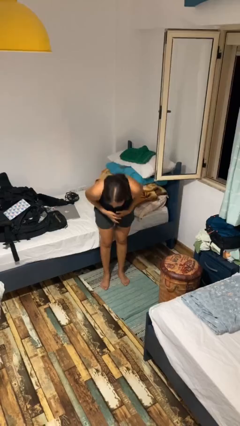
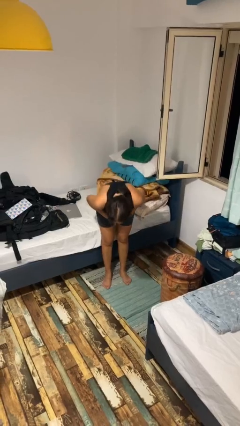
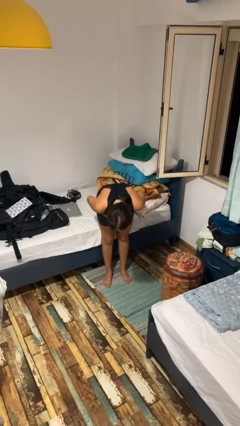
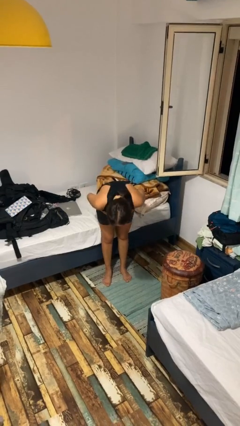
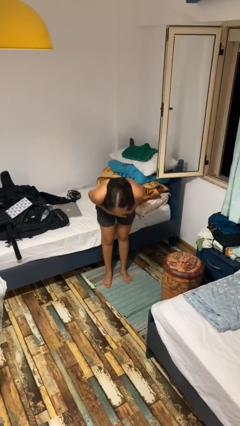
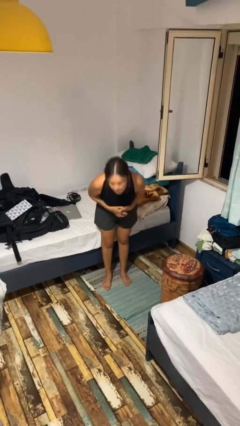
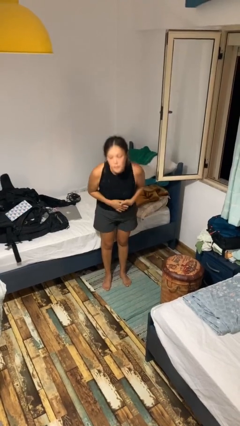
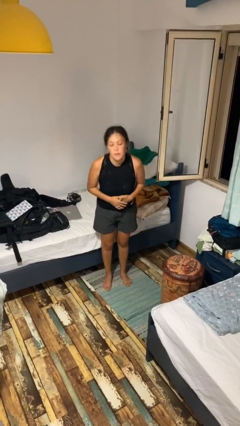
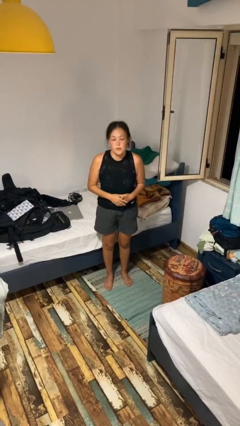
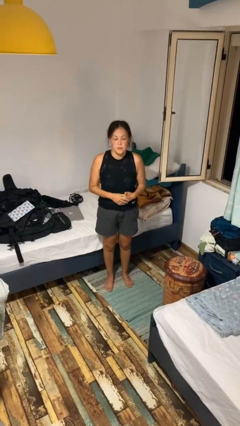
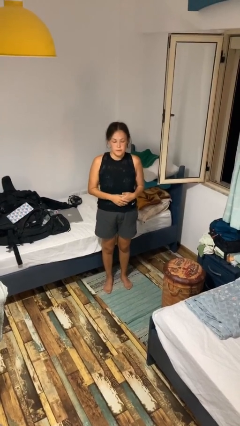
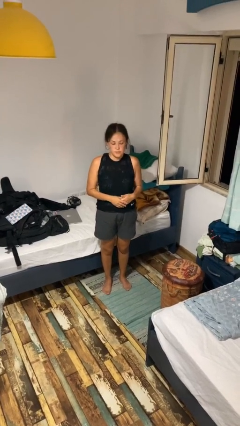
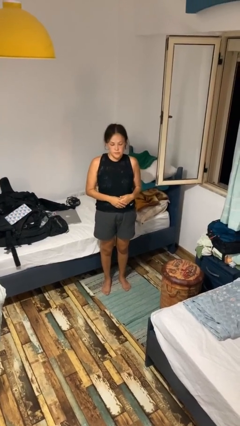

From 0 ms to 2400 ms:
person bows

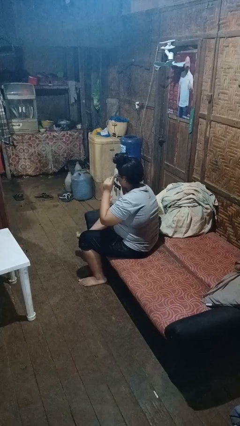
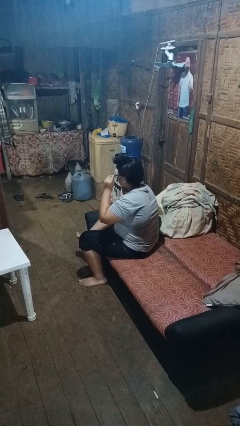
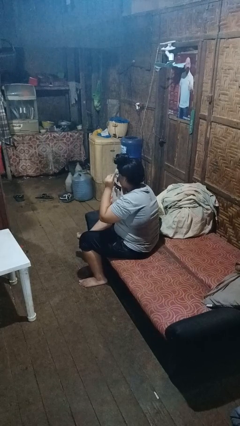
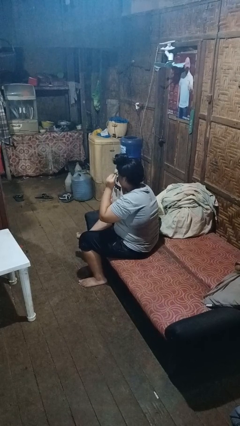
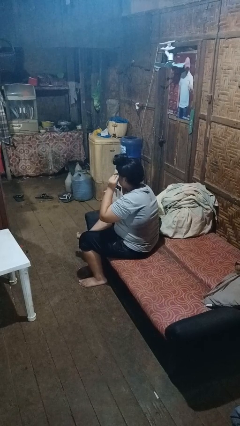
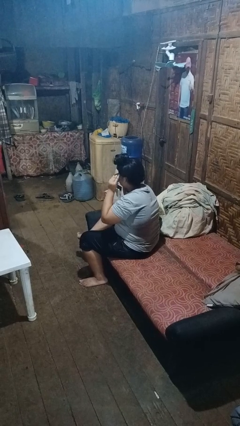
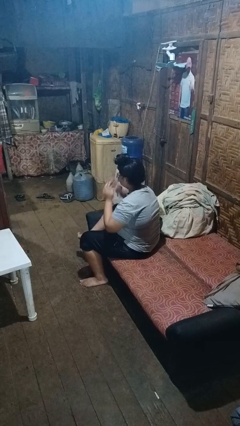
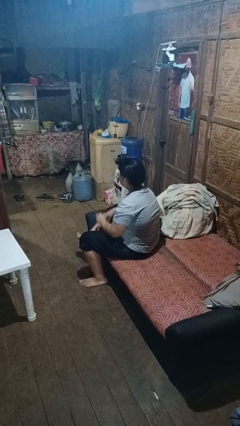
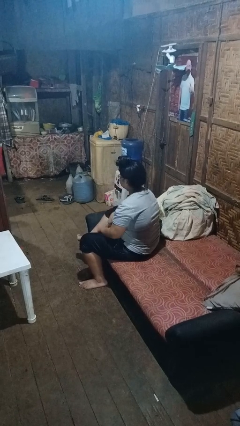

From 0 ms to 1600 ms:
person puts on glasses

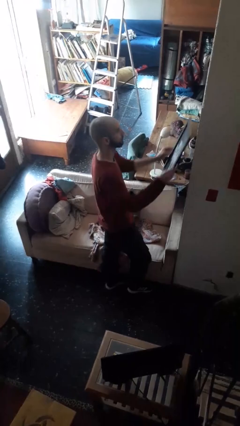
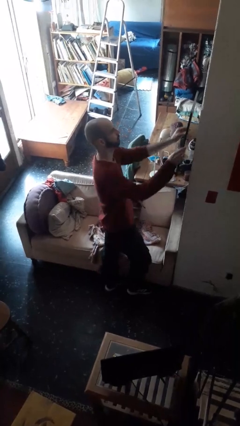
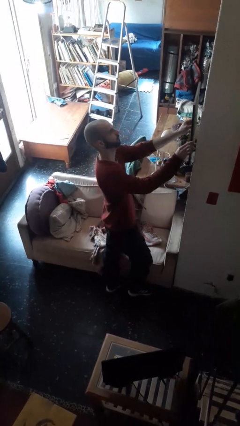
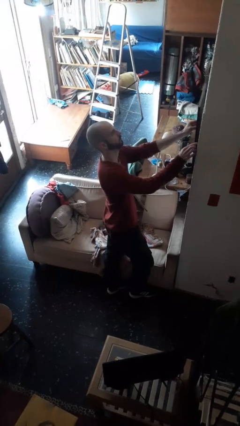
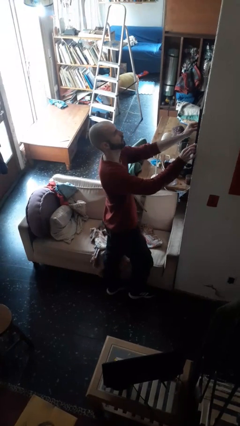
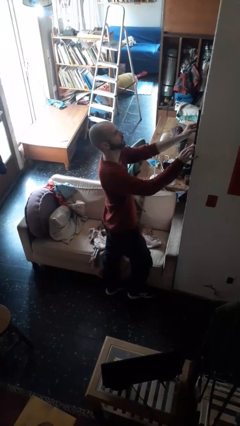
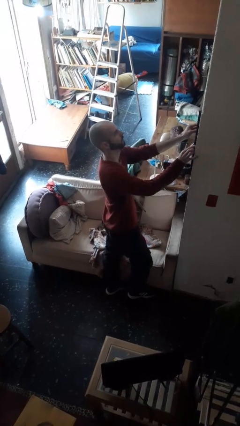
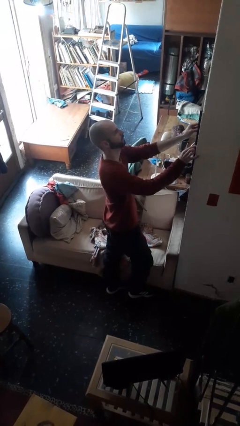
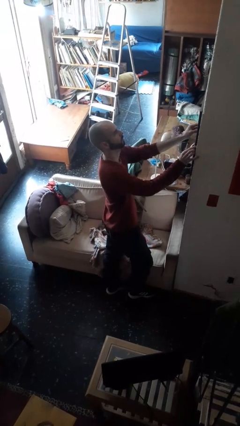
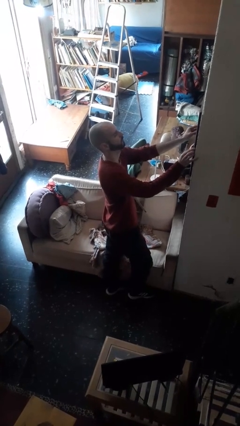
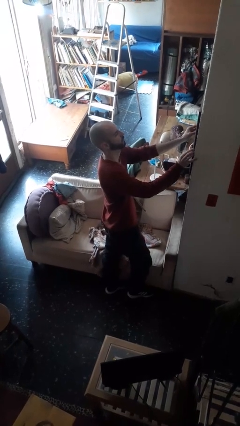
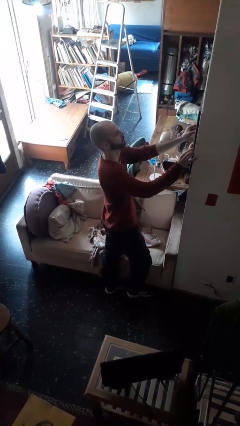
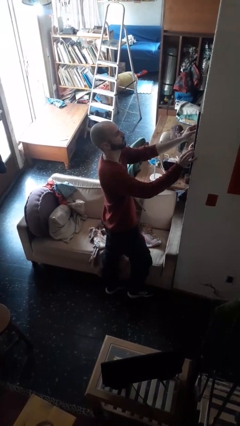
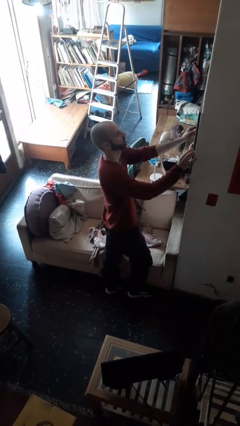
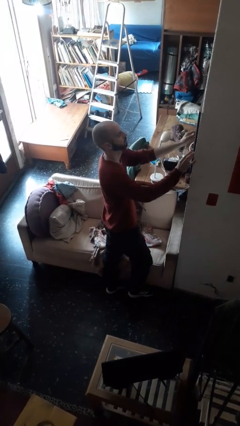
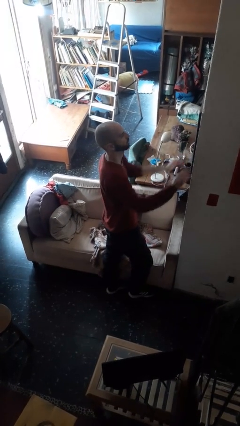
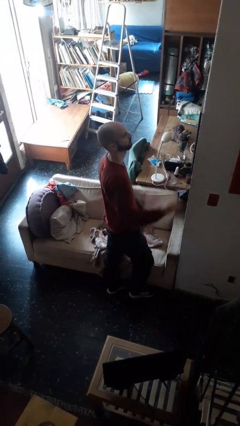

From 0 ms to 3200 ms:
person puts up picture frame

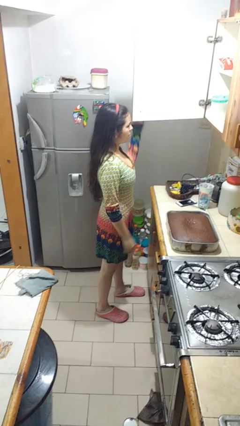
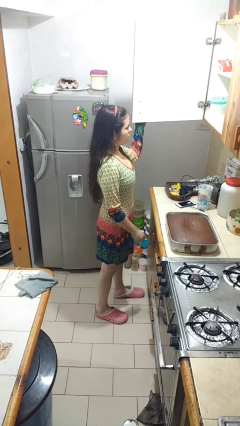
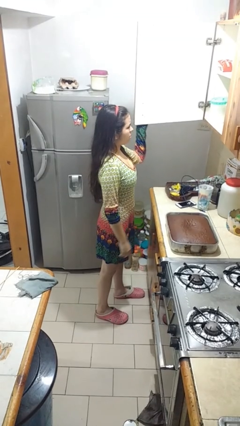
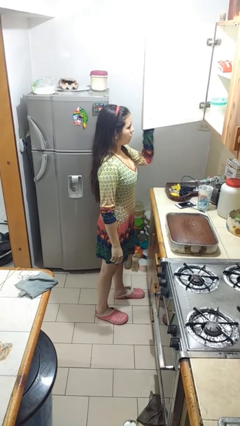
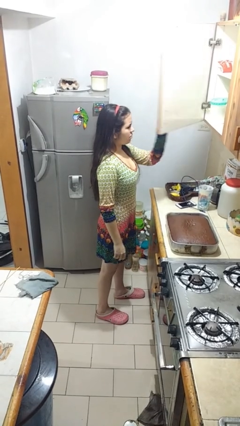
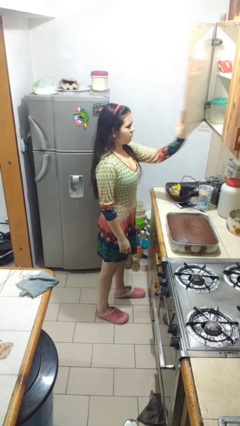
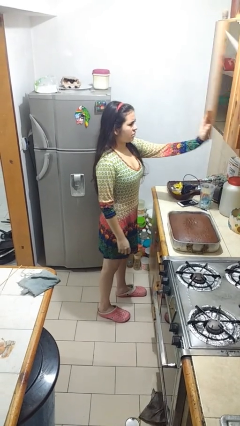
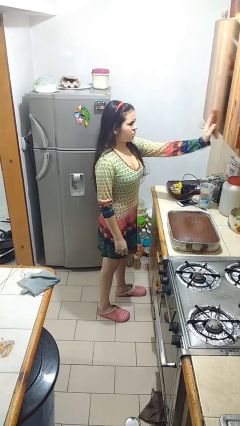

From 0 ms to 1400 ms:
person closes cabinet

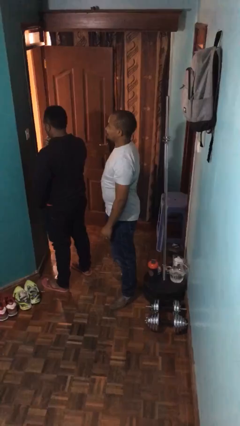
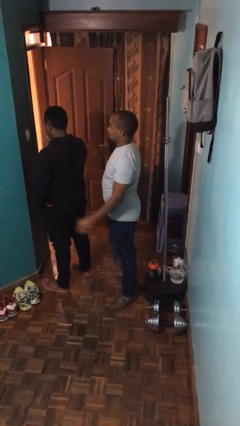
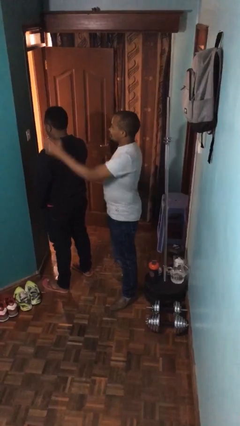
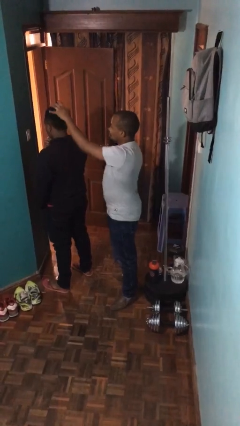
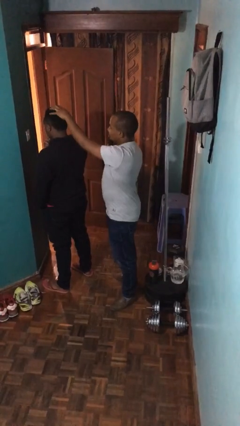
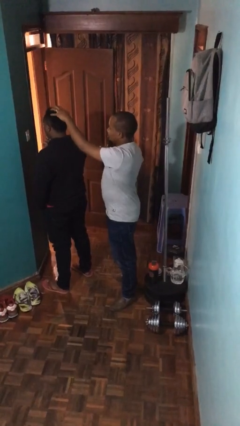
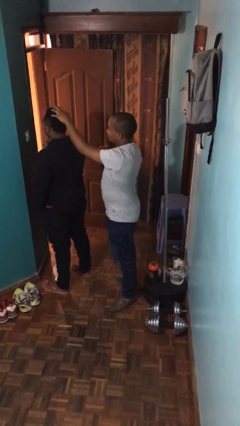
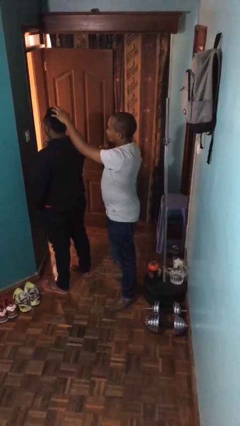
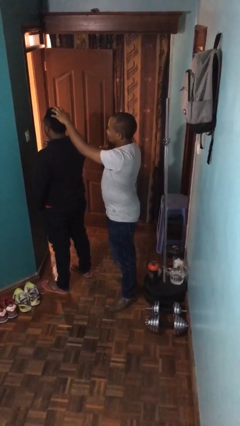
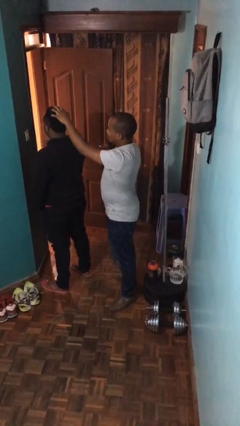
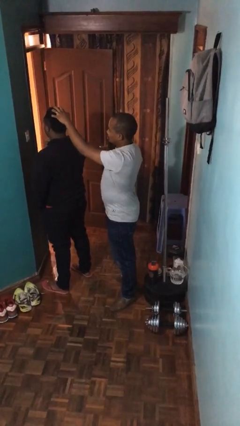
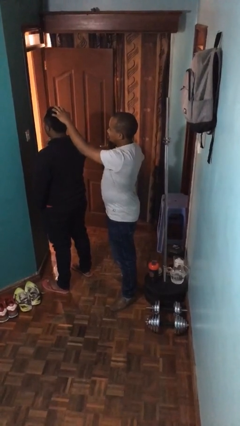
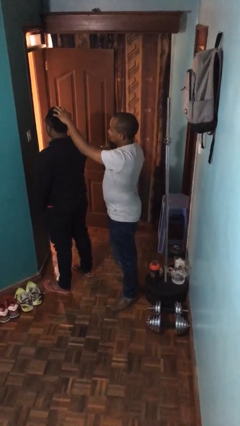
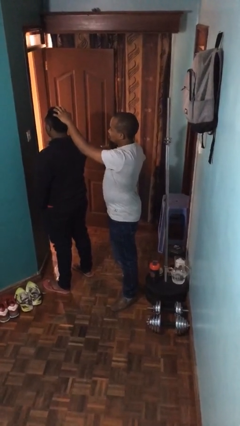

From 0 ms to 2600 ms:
person grabs person by hair

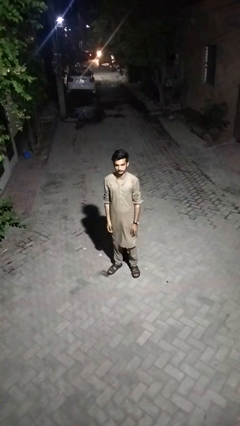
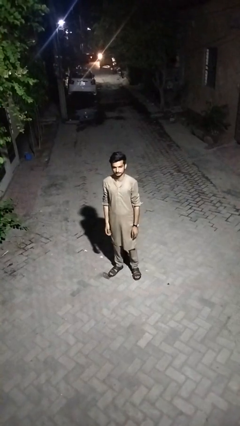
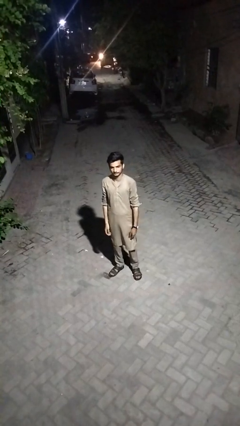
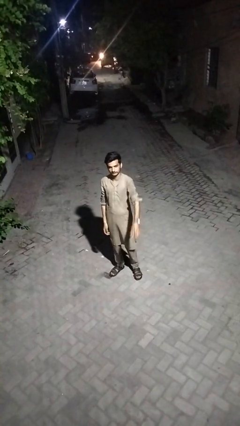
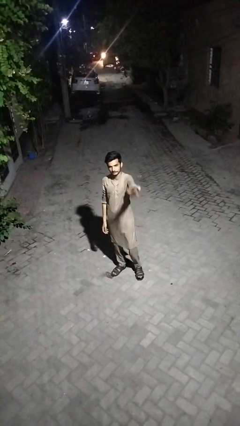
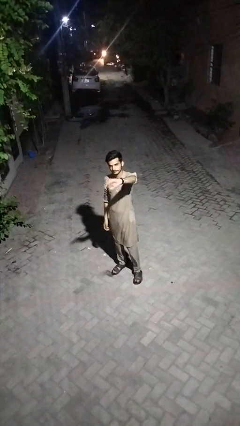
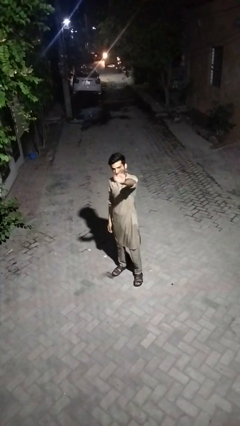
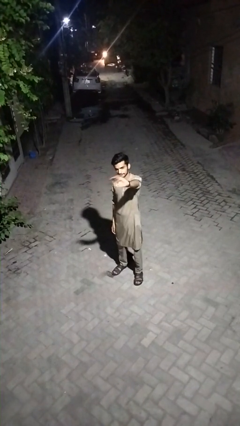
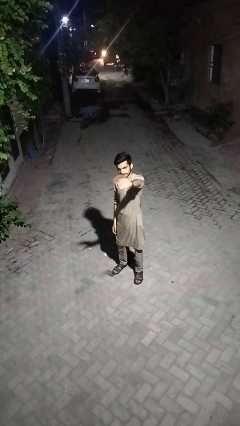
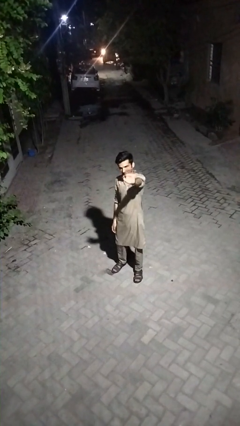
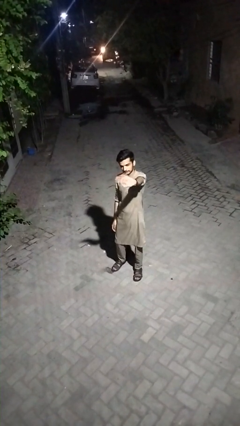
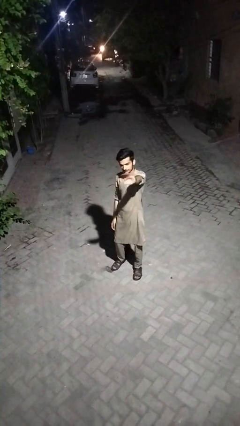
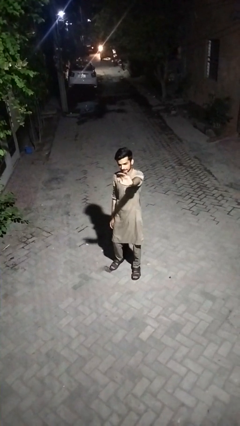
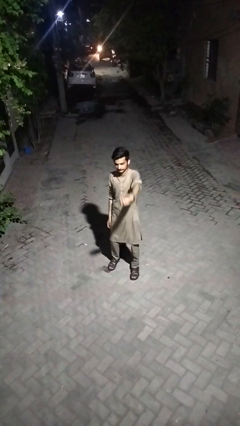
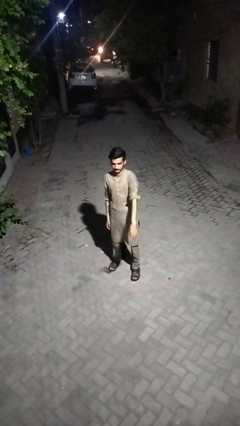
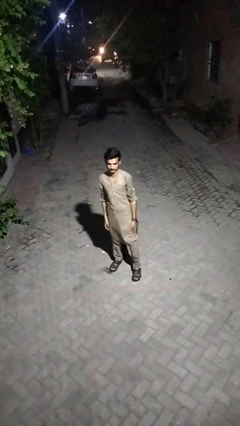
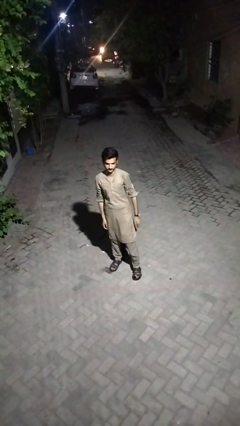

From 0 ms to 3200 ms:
person waves at person

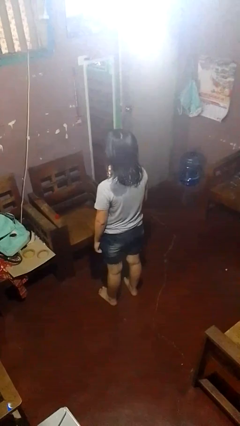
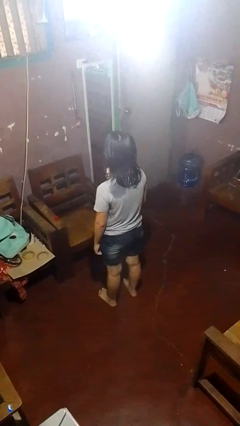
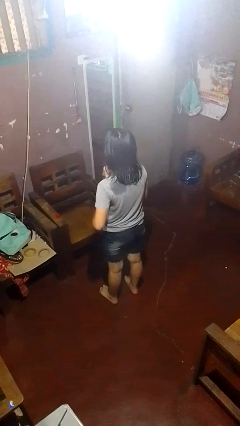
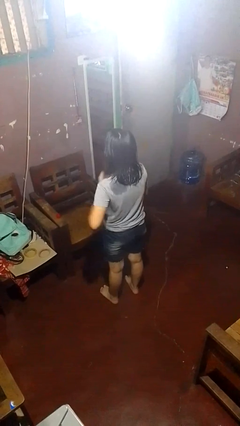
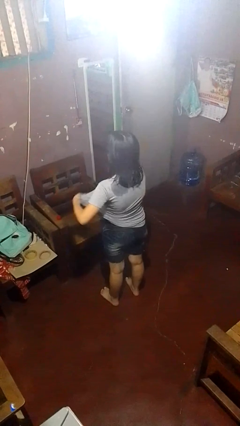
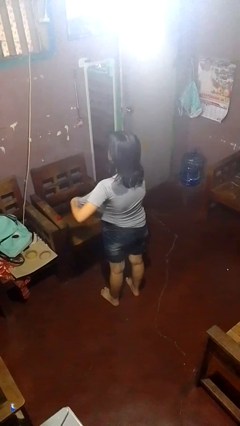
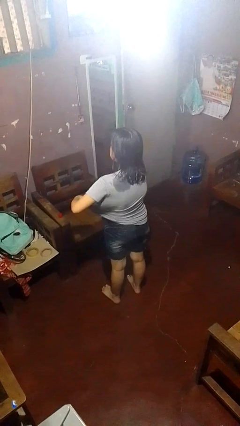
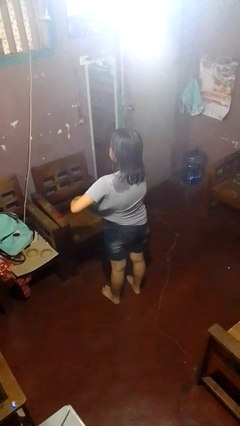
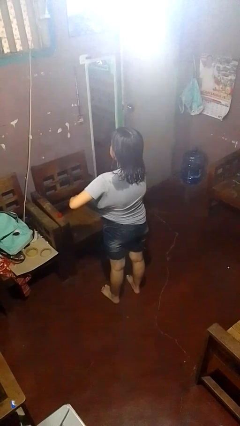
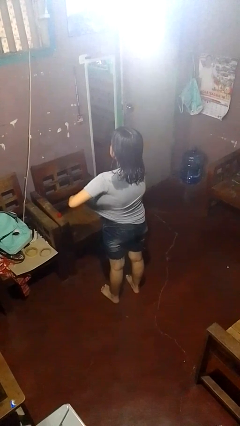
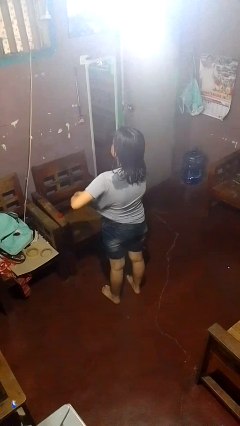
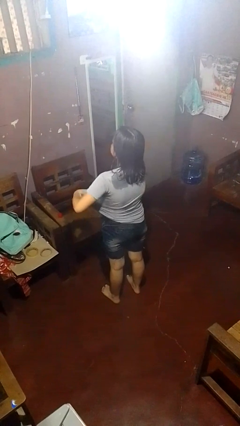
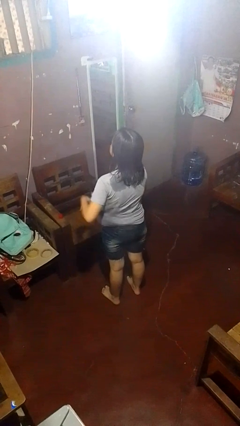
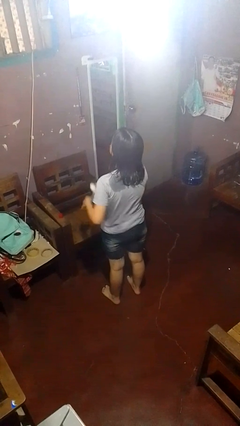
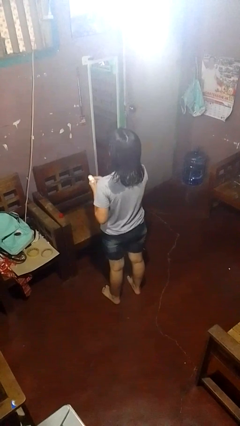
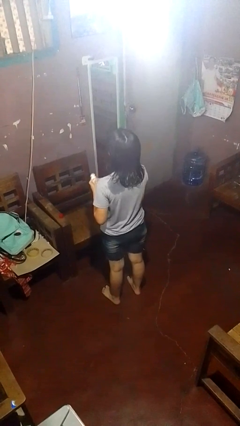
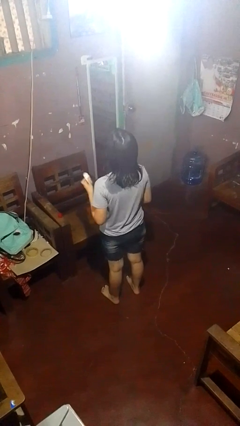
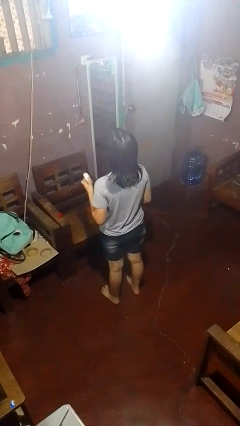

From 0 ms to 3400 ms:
person applies deodorant
